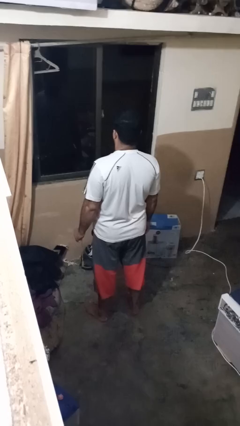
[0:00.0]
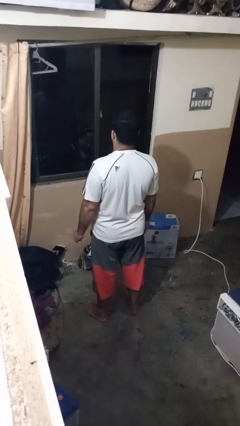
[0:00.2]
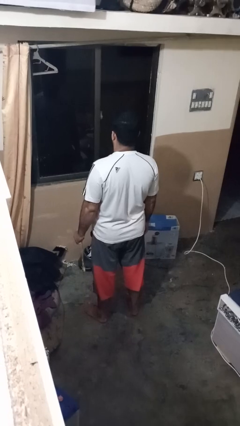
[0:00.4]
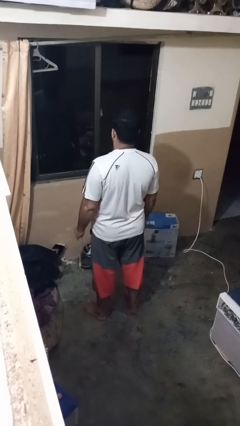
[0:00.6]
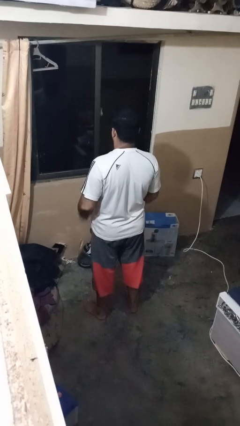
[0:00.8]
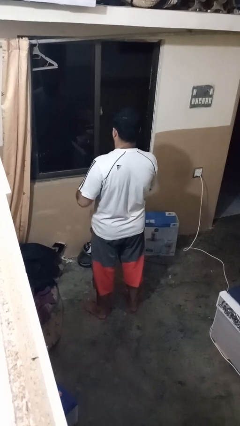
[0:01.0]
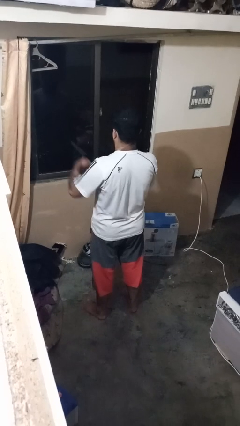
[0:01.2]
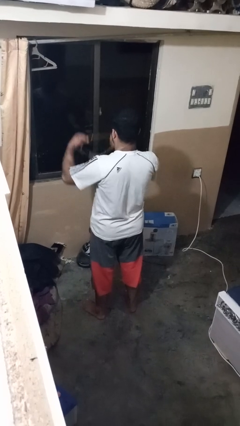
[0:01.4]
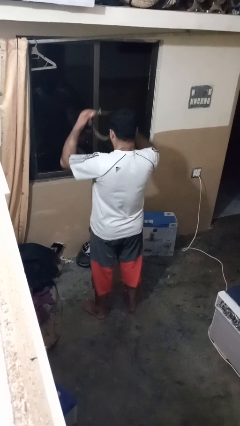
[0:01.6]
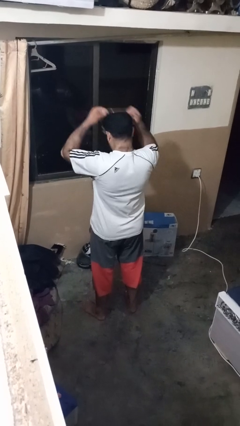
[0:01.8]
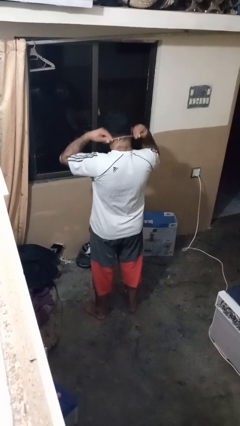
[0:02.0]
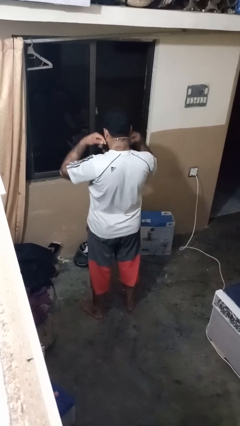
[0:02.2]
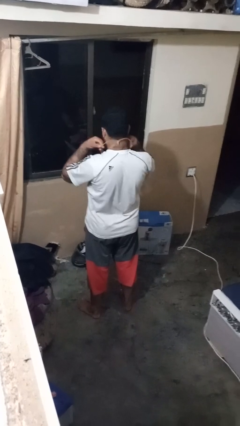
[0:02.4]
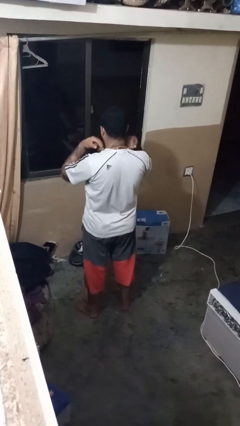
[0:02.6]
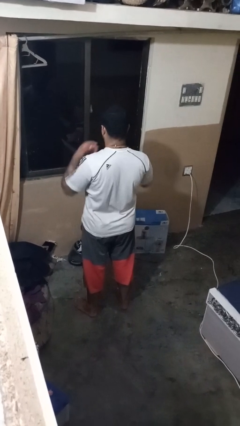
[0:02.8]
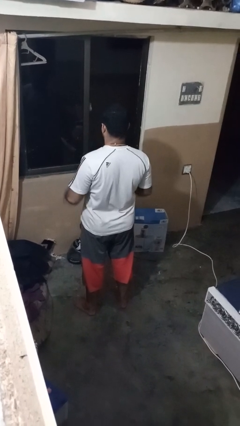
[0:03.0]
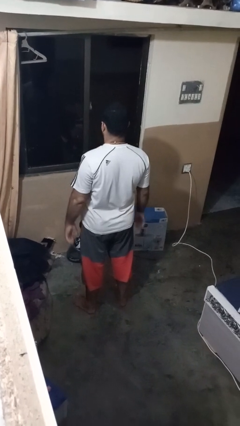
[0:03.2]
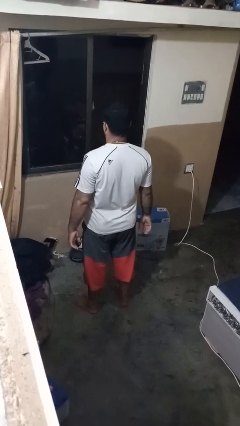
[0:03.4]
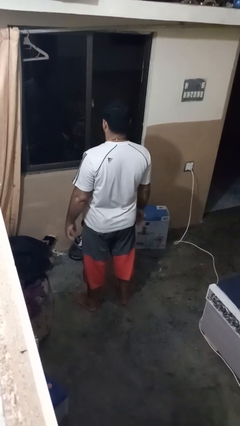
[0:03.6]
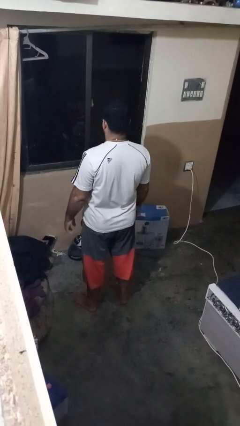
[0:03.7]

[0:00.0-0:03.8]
person puts on necklace

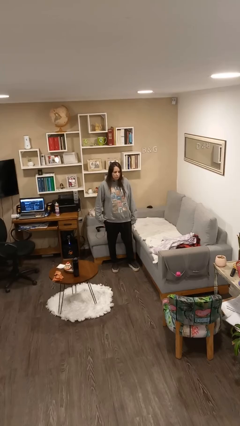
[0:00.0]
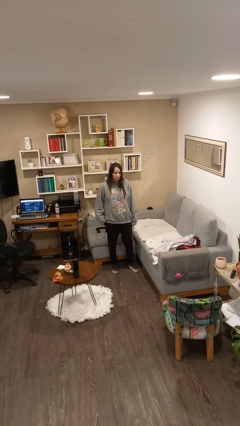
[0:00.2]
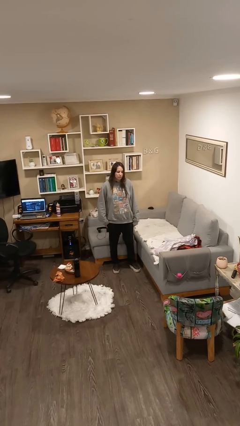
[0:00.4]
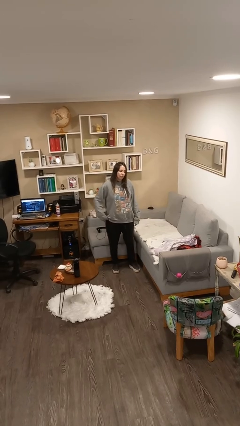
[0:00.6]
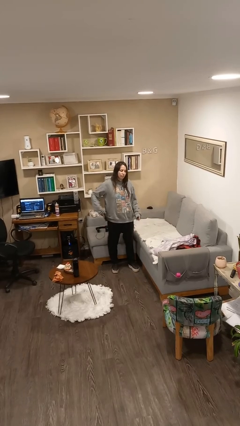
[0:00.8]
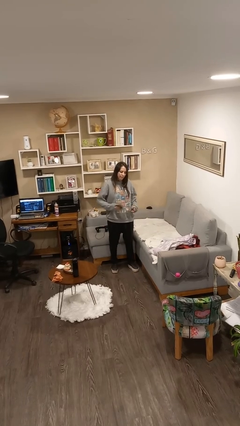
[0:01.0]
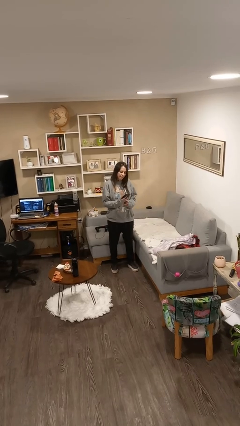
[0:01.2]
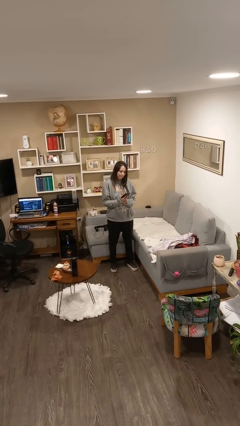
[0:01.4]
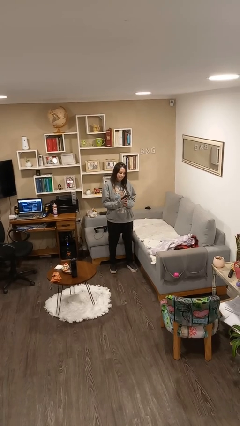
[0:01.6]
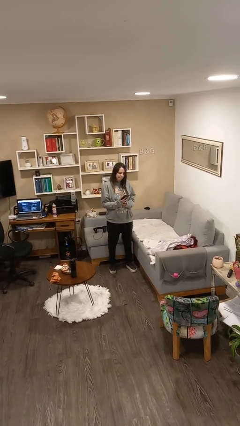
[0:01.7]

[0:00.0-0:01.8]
person takes phone from pocket

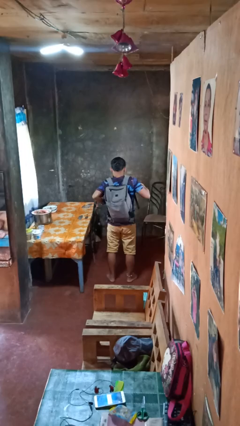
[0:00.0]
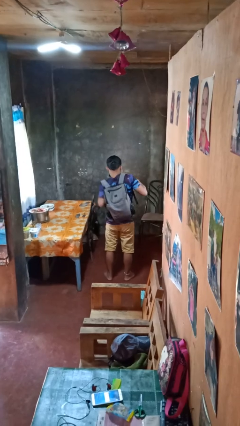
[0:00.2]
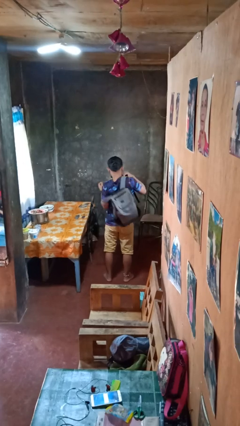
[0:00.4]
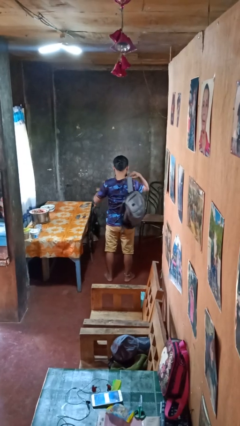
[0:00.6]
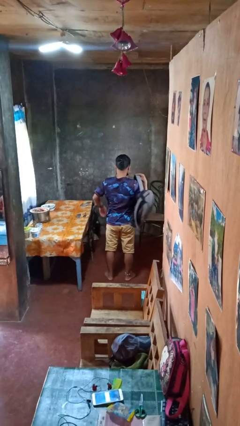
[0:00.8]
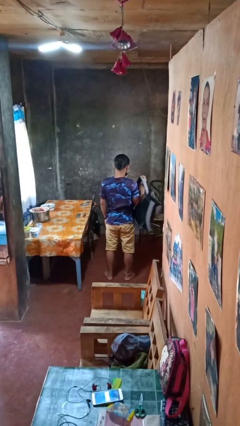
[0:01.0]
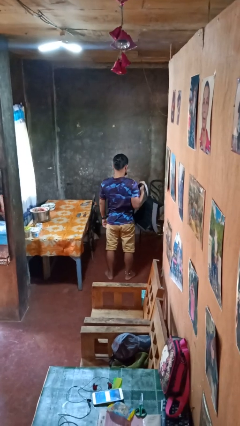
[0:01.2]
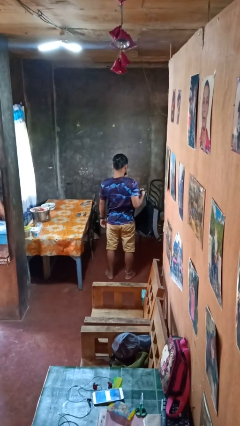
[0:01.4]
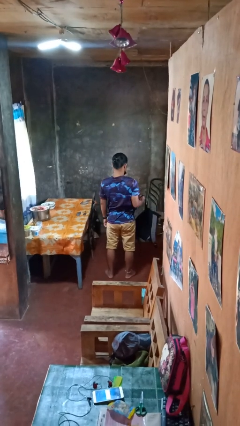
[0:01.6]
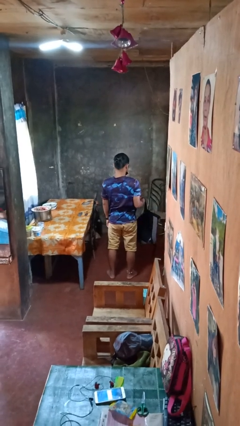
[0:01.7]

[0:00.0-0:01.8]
person takes off backpack

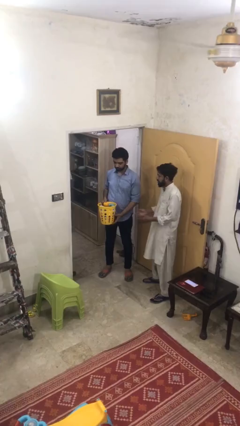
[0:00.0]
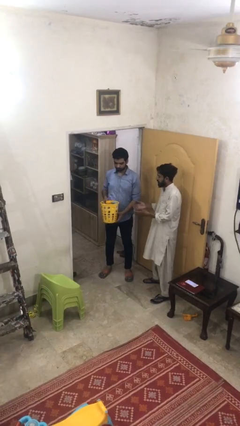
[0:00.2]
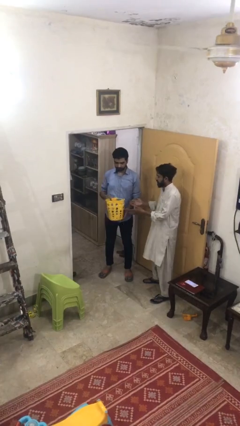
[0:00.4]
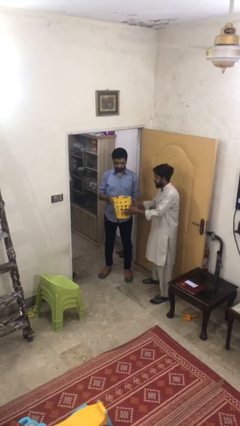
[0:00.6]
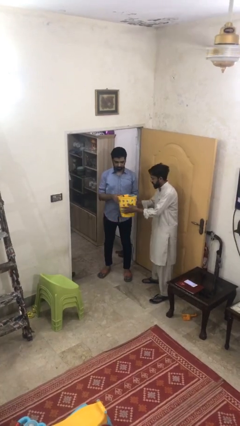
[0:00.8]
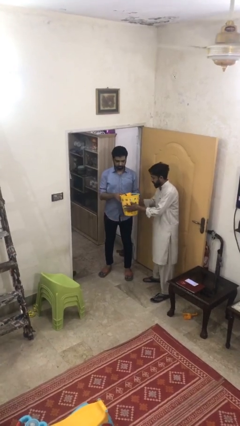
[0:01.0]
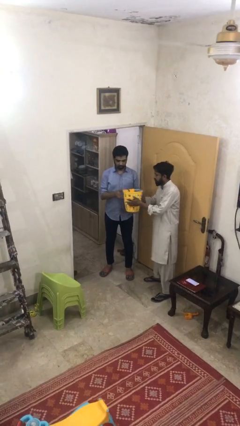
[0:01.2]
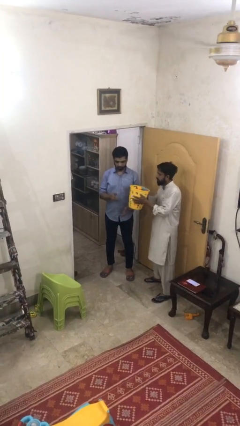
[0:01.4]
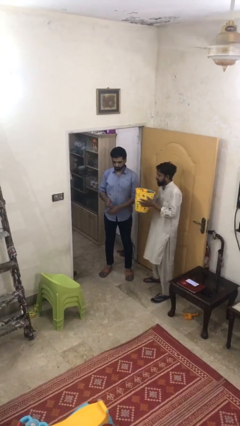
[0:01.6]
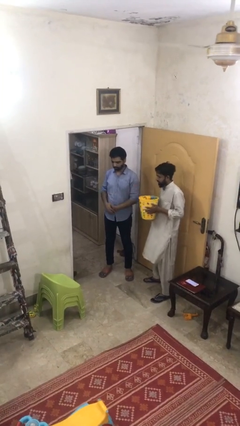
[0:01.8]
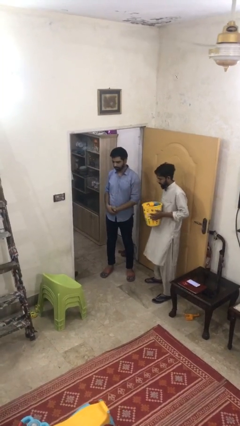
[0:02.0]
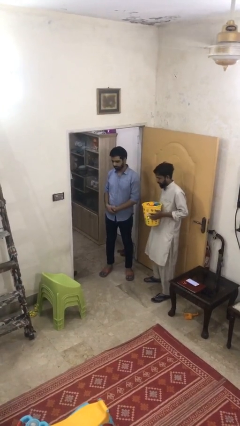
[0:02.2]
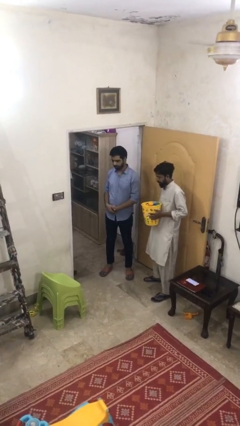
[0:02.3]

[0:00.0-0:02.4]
person transfers object to person

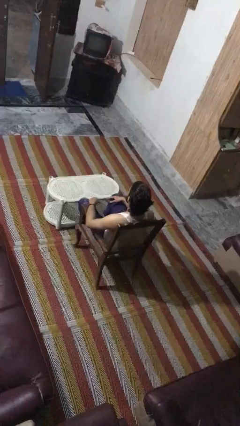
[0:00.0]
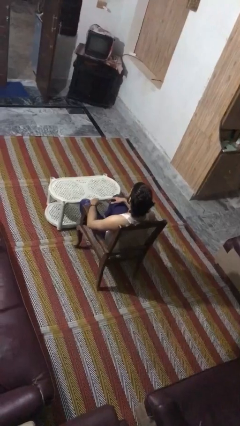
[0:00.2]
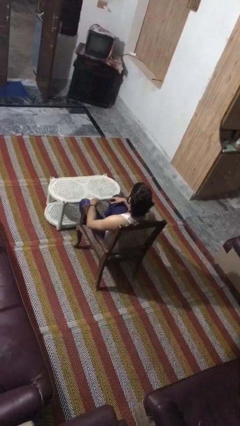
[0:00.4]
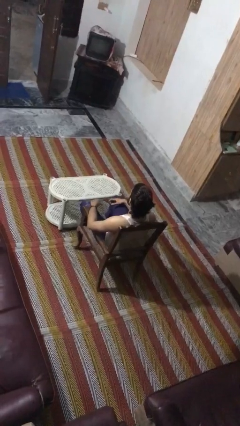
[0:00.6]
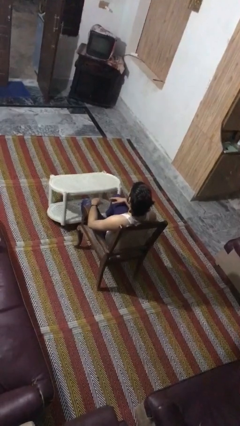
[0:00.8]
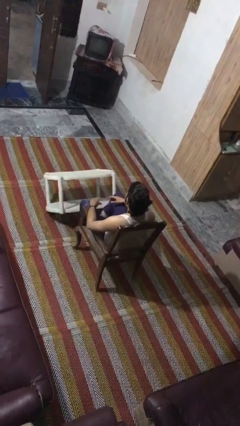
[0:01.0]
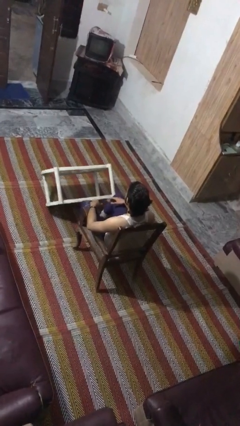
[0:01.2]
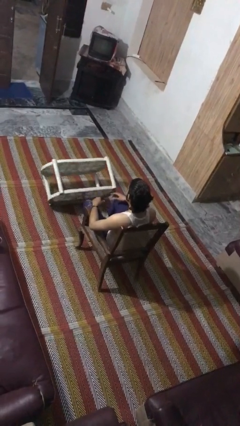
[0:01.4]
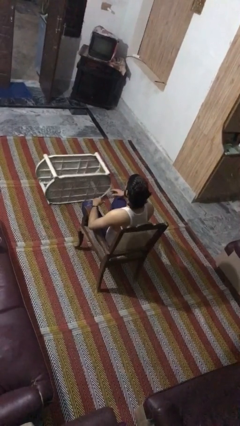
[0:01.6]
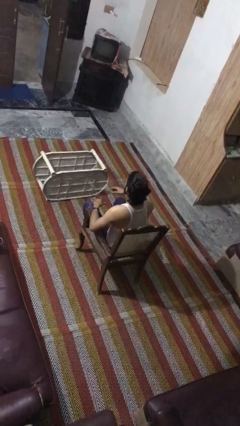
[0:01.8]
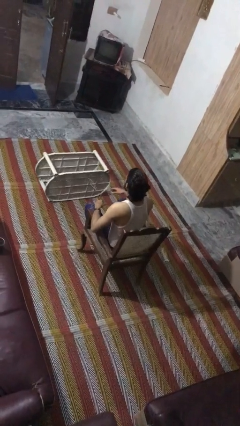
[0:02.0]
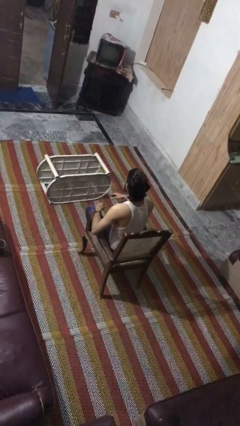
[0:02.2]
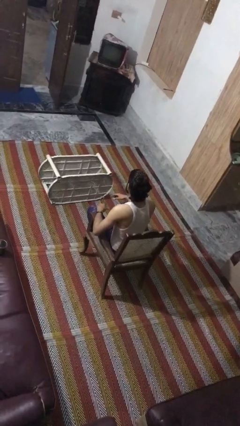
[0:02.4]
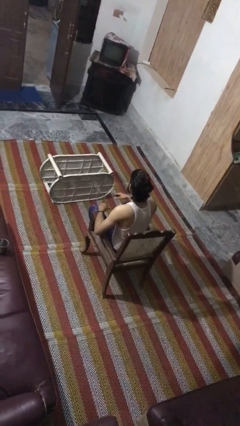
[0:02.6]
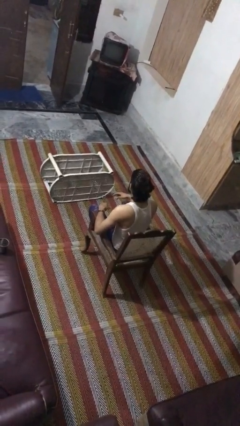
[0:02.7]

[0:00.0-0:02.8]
person knocks over furniture

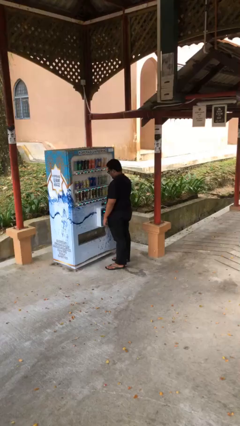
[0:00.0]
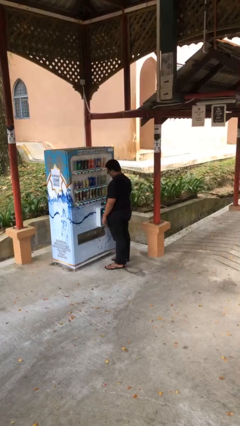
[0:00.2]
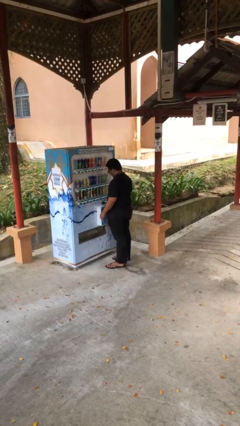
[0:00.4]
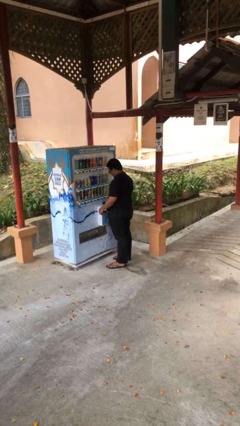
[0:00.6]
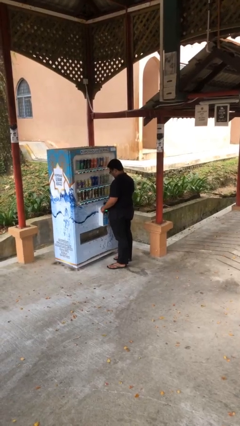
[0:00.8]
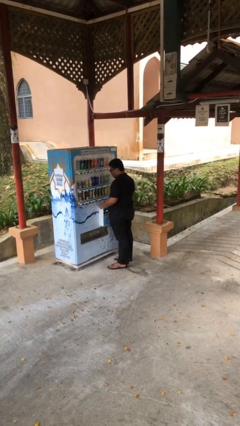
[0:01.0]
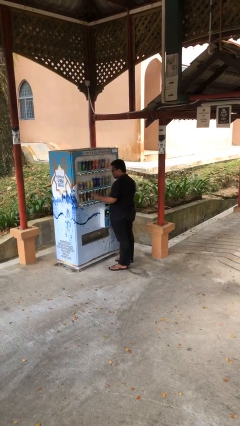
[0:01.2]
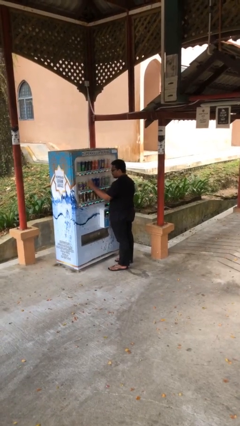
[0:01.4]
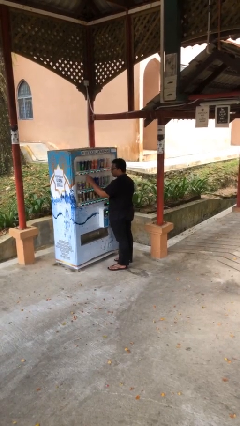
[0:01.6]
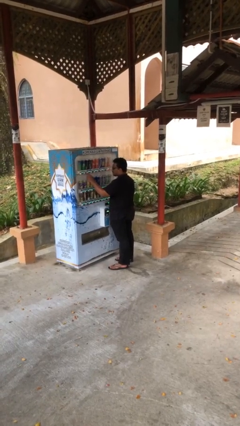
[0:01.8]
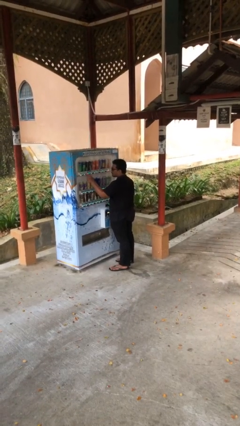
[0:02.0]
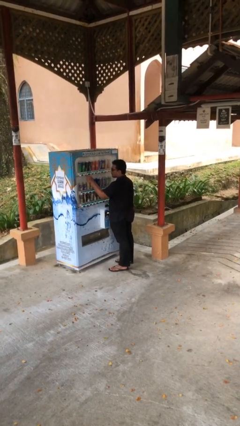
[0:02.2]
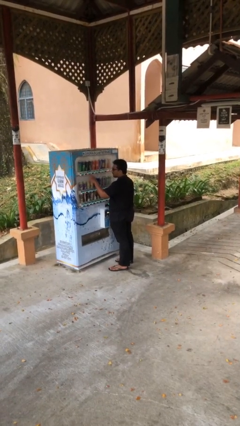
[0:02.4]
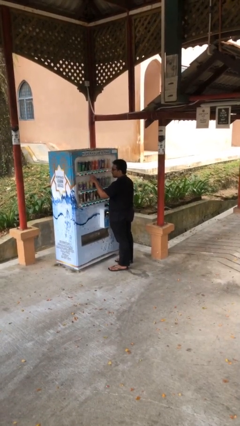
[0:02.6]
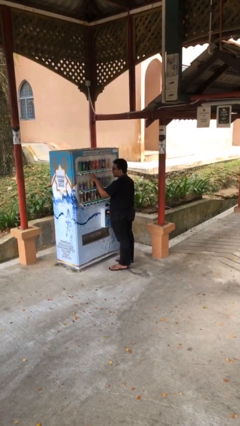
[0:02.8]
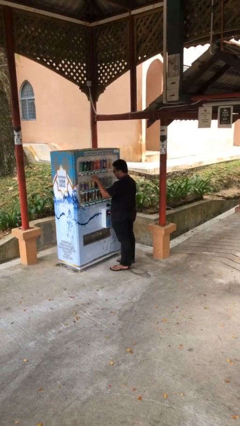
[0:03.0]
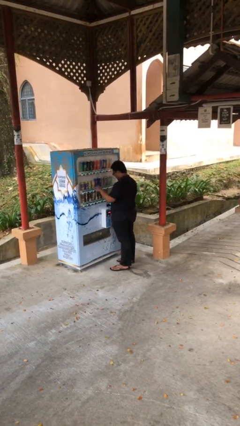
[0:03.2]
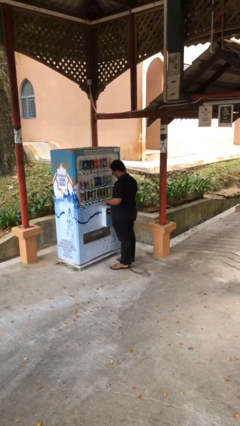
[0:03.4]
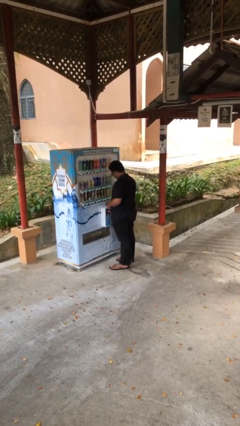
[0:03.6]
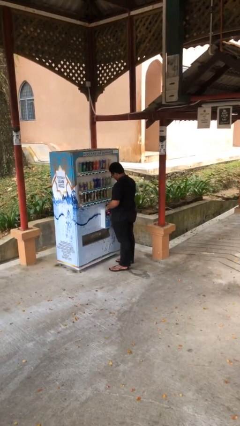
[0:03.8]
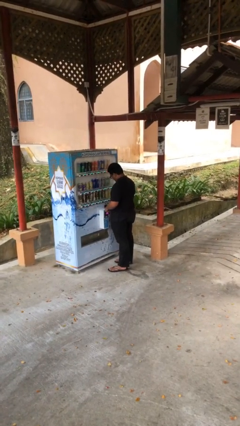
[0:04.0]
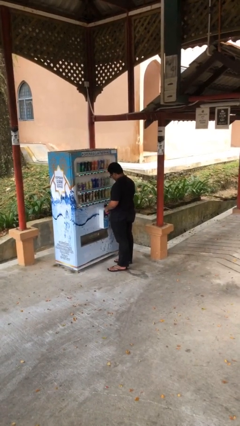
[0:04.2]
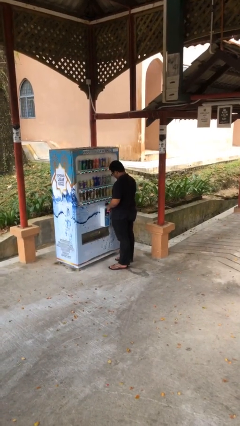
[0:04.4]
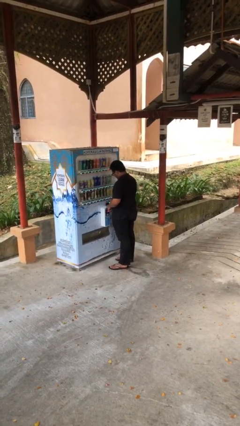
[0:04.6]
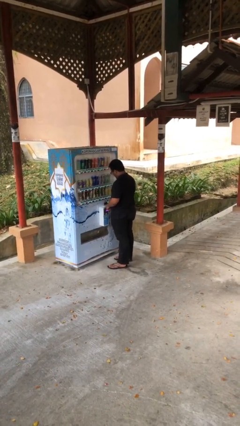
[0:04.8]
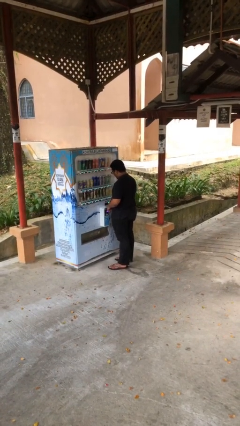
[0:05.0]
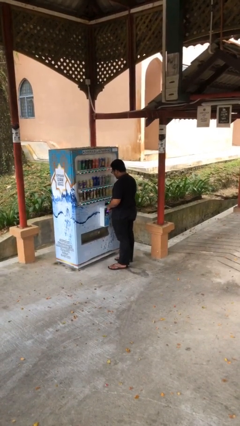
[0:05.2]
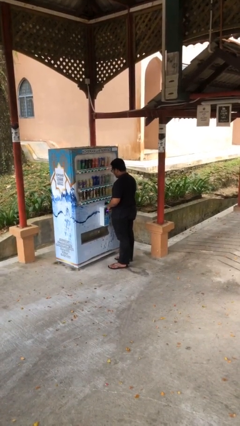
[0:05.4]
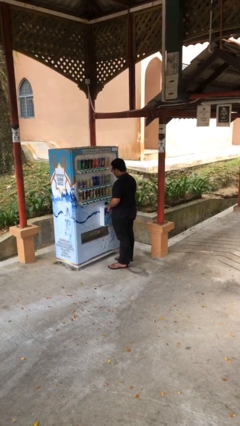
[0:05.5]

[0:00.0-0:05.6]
person purchases from machine
